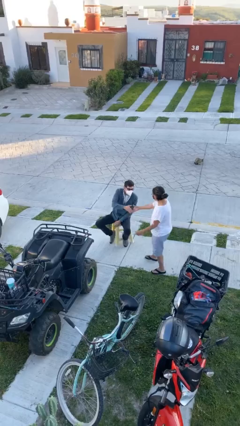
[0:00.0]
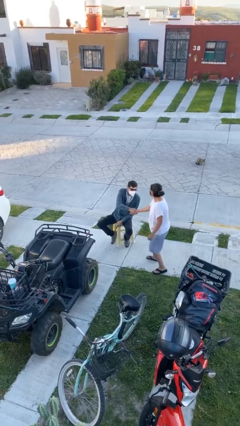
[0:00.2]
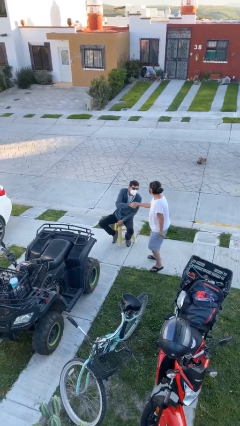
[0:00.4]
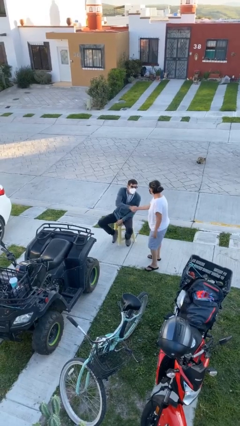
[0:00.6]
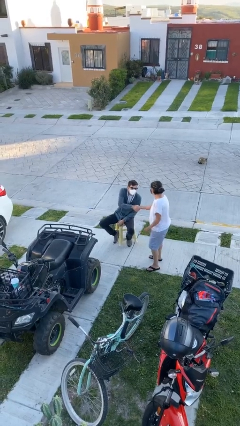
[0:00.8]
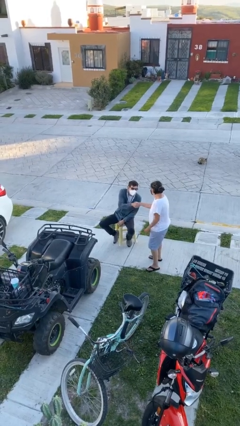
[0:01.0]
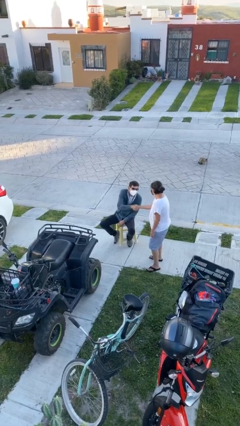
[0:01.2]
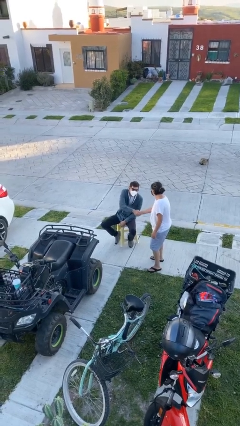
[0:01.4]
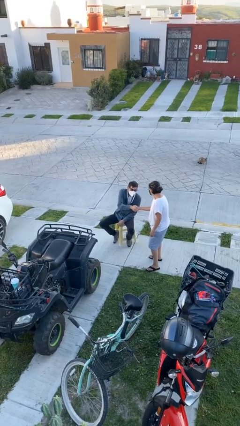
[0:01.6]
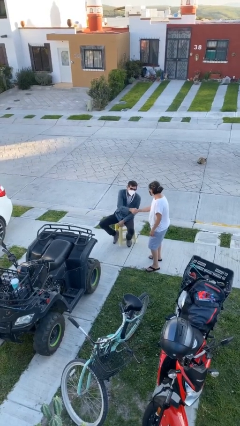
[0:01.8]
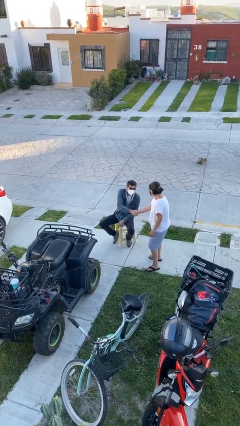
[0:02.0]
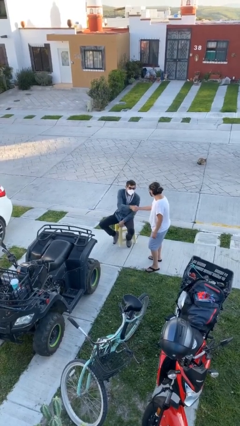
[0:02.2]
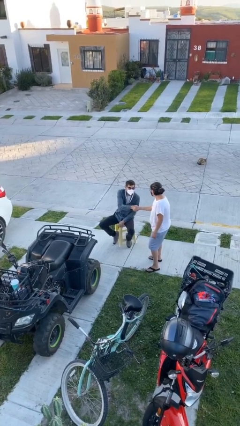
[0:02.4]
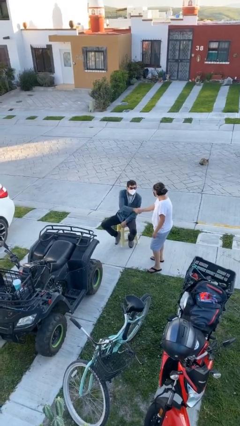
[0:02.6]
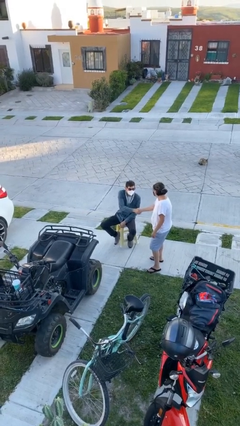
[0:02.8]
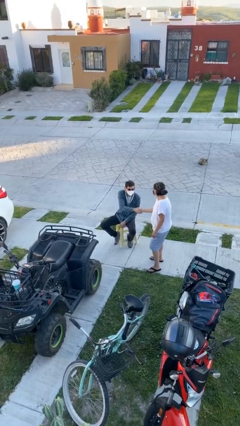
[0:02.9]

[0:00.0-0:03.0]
person shakes hand

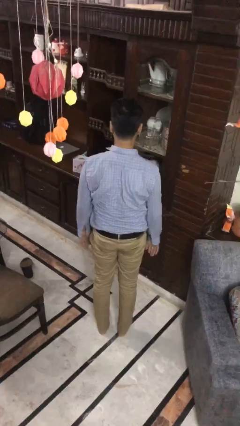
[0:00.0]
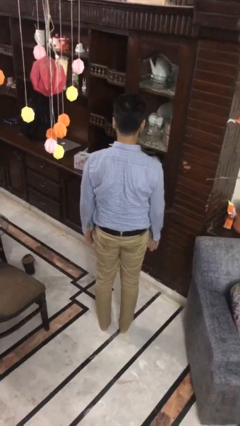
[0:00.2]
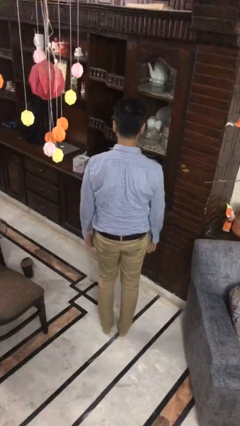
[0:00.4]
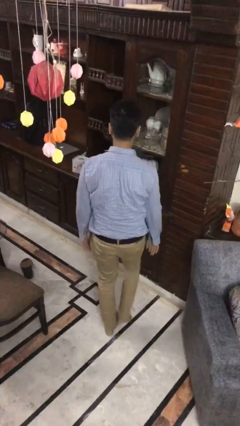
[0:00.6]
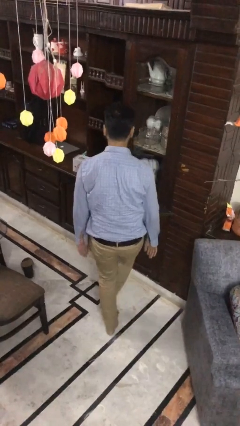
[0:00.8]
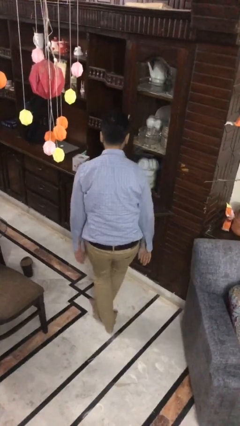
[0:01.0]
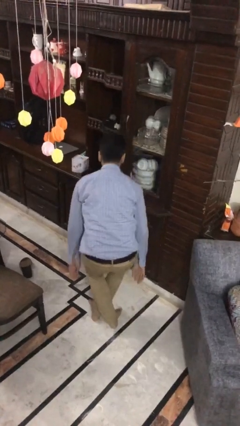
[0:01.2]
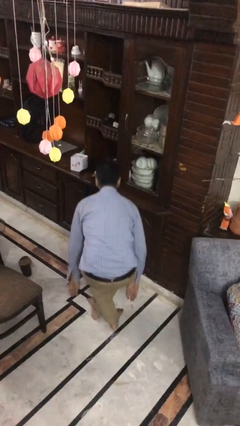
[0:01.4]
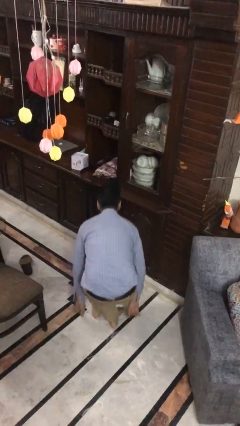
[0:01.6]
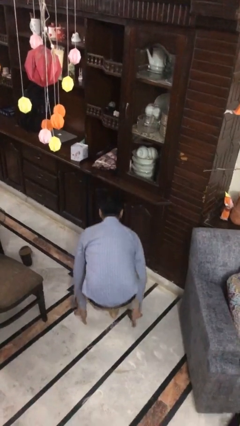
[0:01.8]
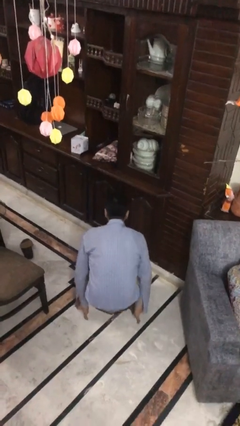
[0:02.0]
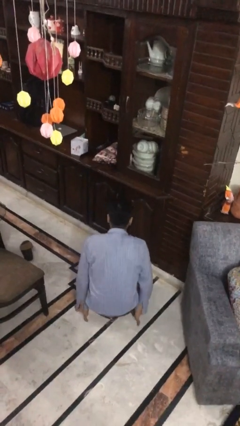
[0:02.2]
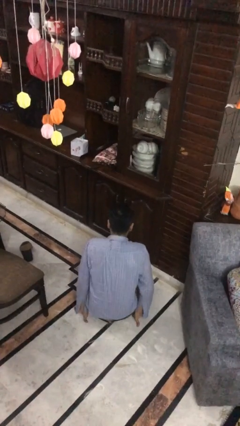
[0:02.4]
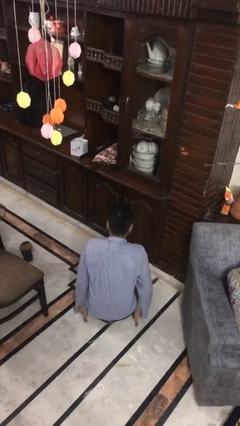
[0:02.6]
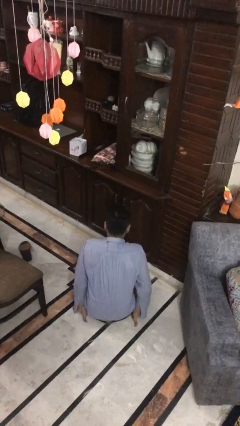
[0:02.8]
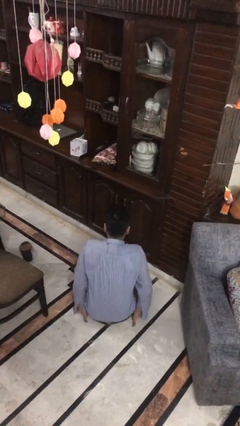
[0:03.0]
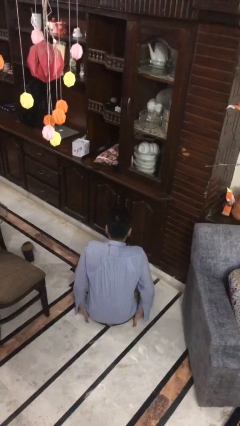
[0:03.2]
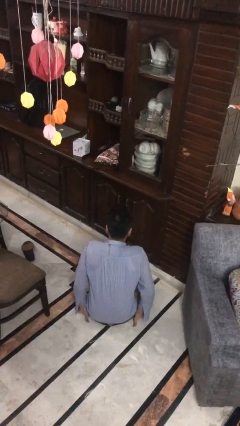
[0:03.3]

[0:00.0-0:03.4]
person sits crisscross

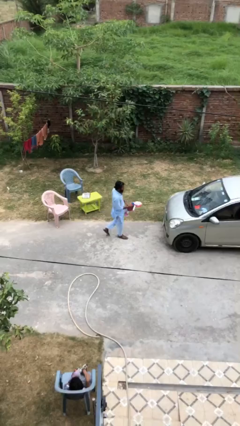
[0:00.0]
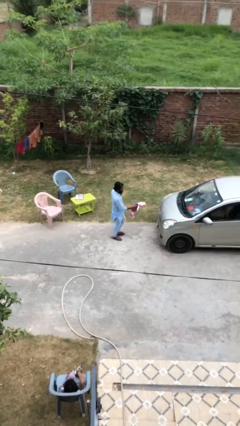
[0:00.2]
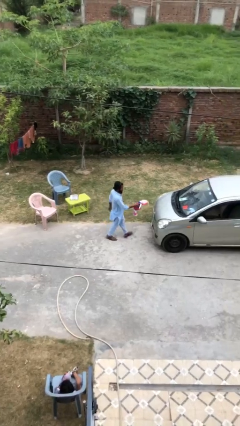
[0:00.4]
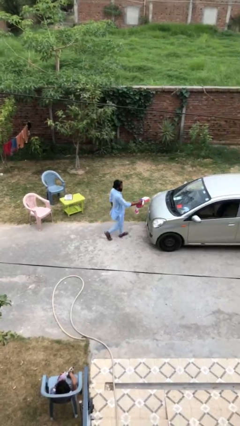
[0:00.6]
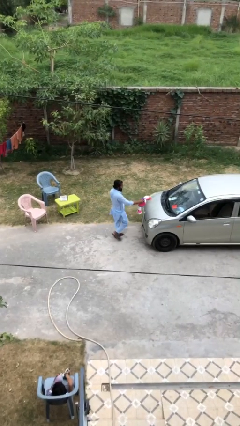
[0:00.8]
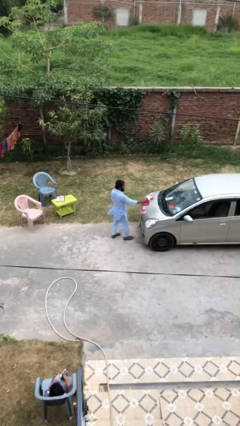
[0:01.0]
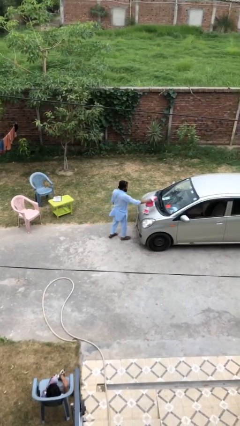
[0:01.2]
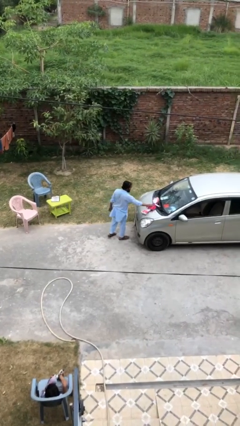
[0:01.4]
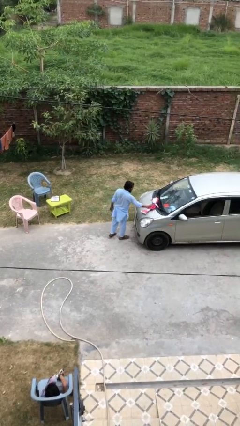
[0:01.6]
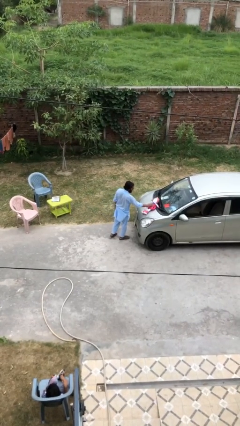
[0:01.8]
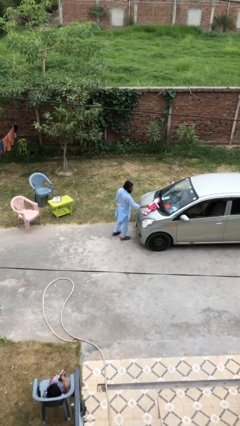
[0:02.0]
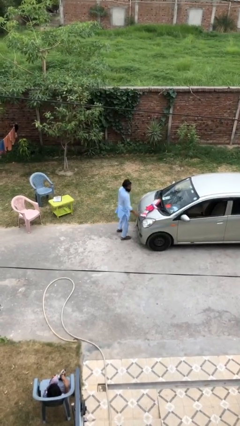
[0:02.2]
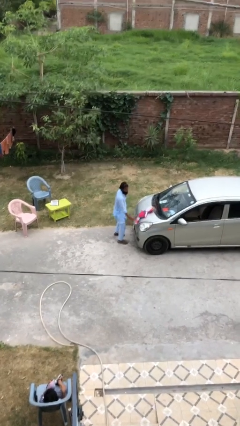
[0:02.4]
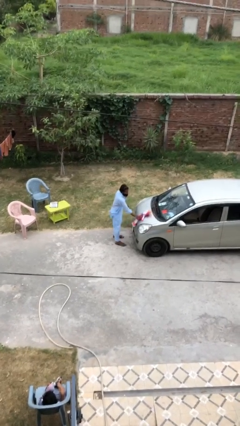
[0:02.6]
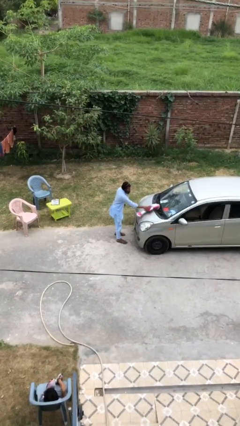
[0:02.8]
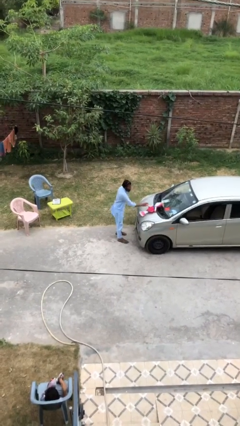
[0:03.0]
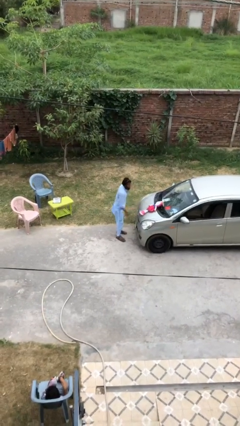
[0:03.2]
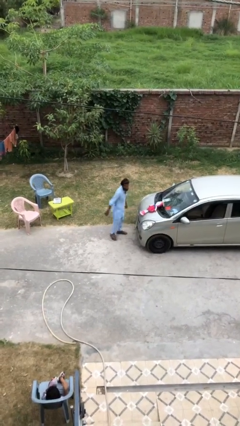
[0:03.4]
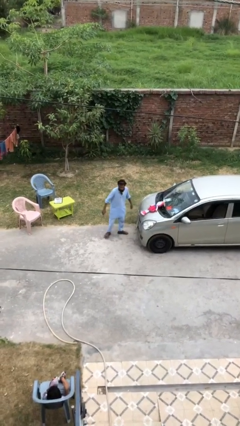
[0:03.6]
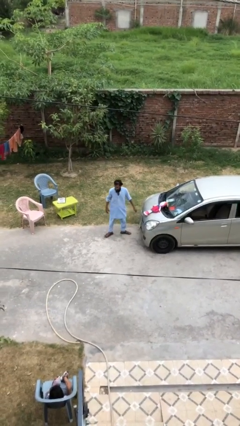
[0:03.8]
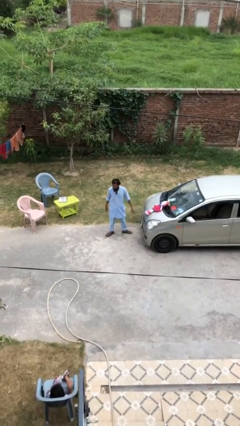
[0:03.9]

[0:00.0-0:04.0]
person puts down object on table

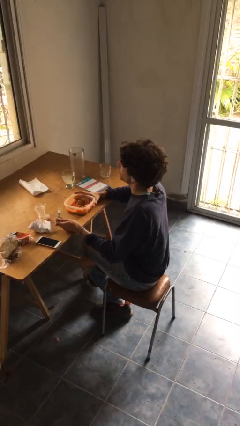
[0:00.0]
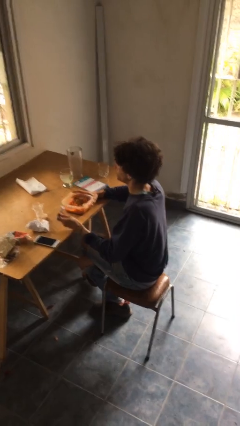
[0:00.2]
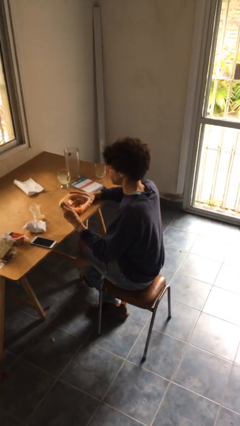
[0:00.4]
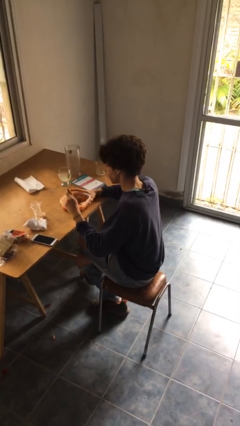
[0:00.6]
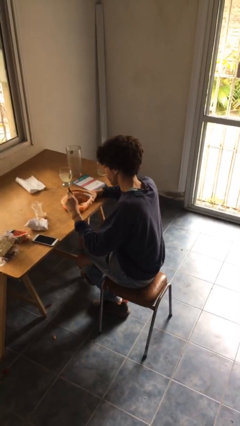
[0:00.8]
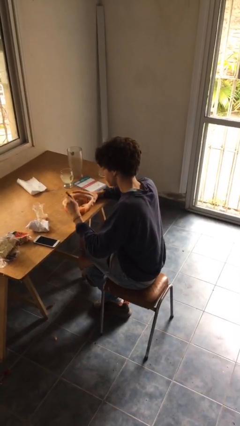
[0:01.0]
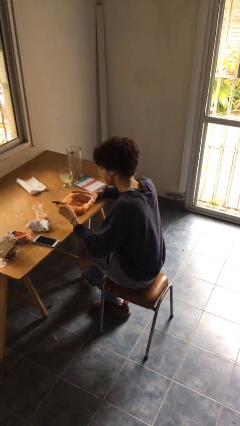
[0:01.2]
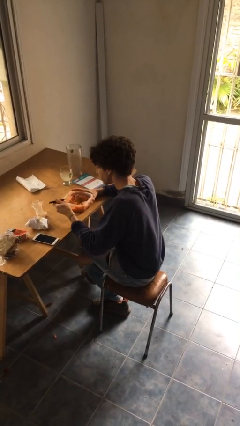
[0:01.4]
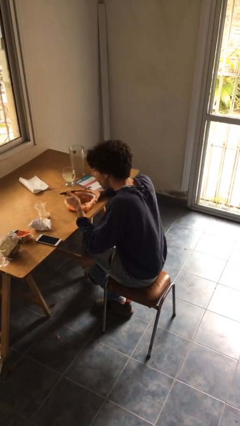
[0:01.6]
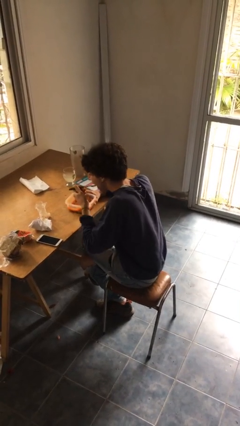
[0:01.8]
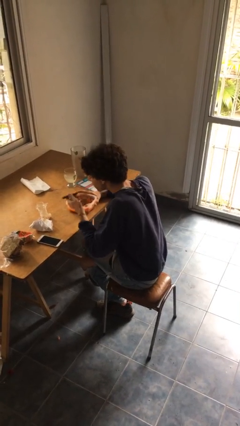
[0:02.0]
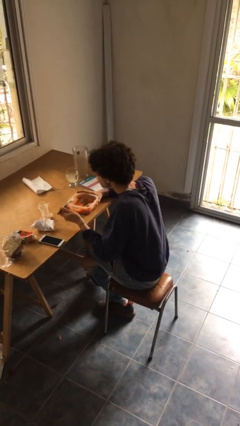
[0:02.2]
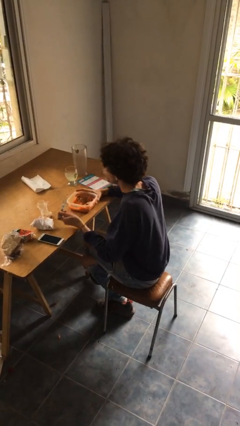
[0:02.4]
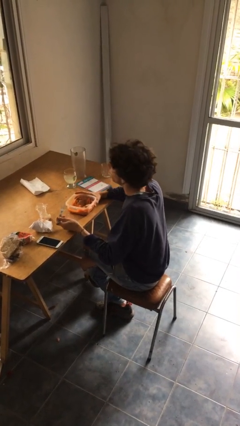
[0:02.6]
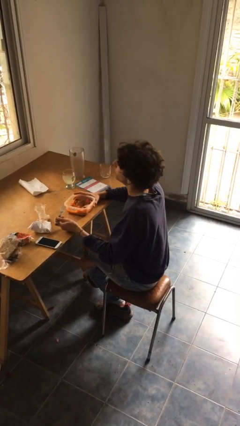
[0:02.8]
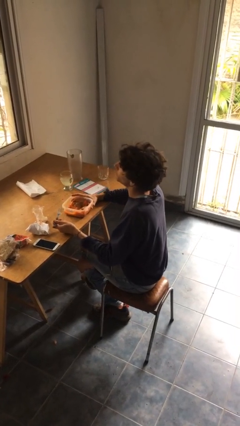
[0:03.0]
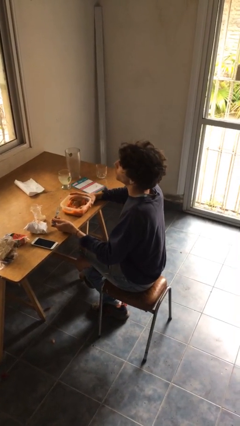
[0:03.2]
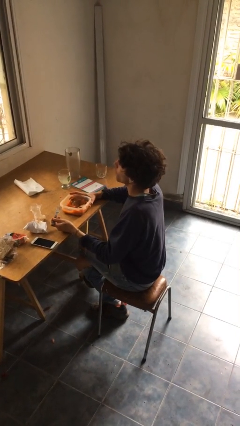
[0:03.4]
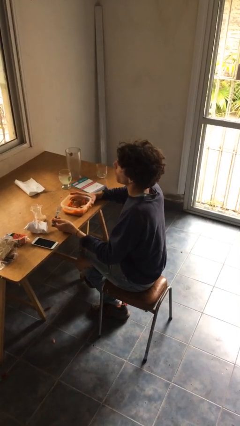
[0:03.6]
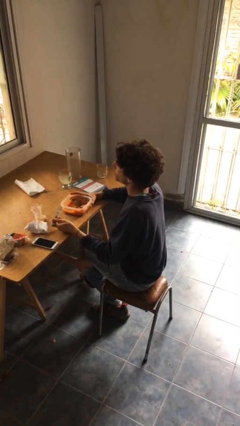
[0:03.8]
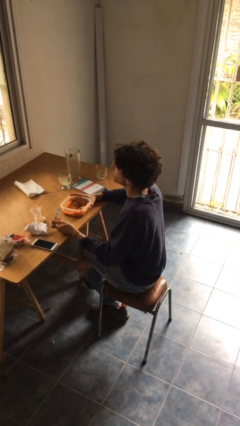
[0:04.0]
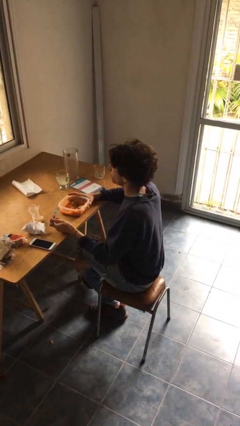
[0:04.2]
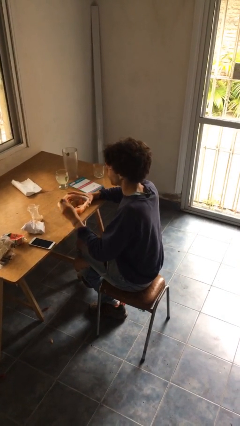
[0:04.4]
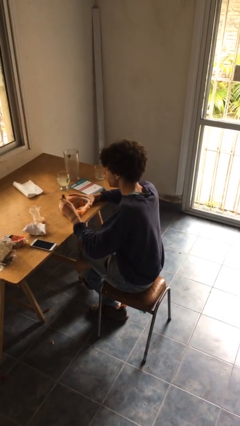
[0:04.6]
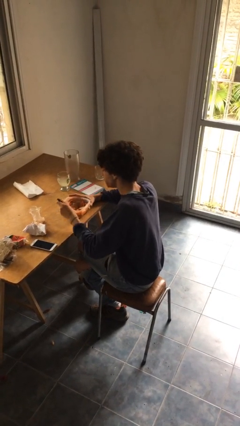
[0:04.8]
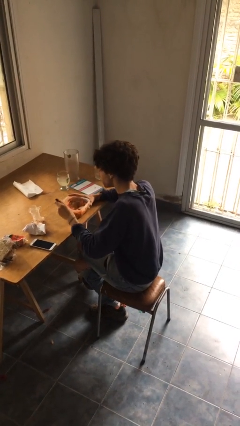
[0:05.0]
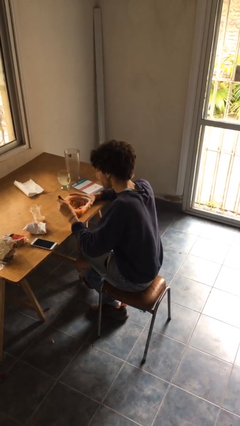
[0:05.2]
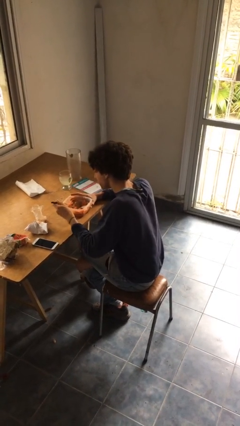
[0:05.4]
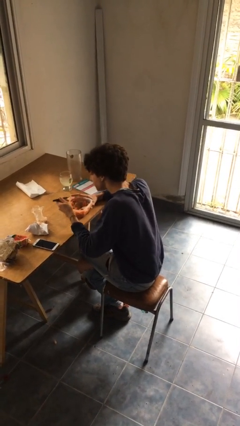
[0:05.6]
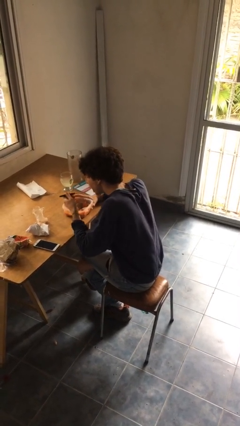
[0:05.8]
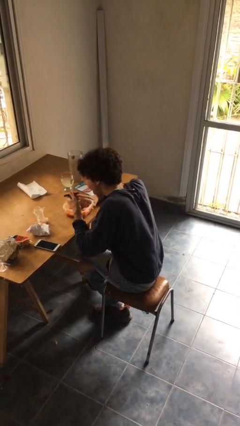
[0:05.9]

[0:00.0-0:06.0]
person eats with utensil

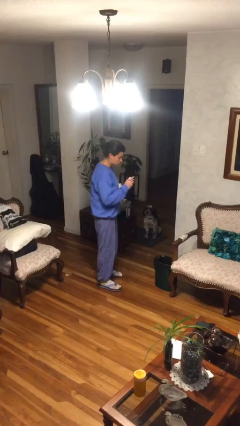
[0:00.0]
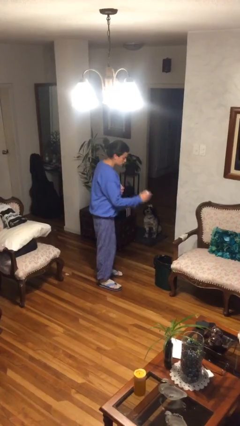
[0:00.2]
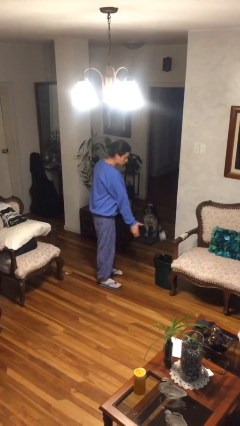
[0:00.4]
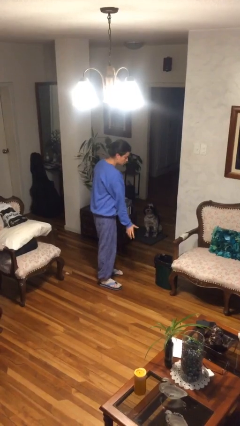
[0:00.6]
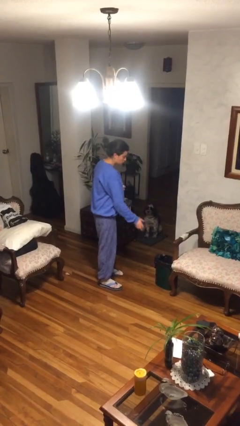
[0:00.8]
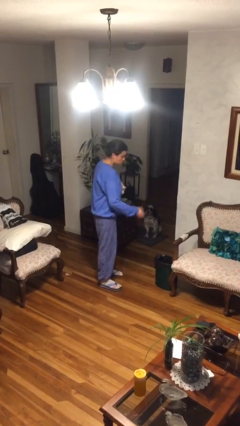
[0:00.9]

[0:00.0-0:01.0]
person discards trash
